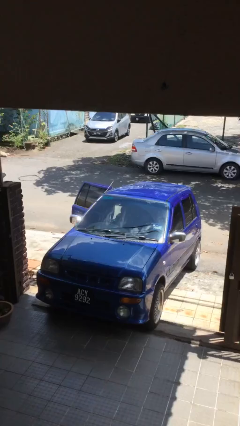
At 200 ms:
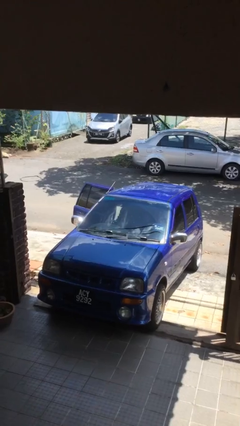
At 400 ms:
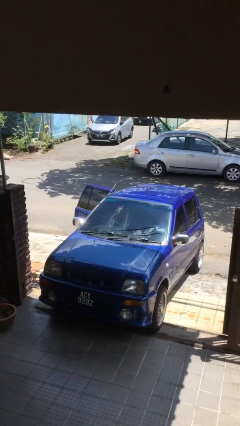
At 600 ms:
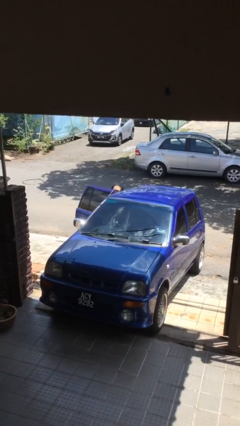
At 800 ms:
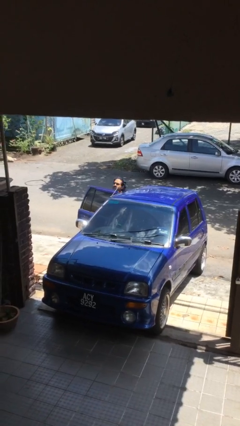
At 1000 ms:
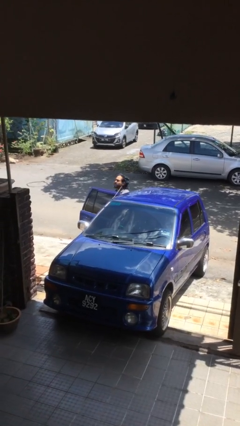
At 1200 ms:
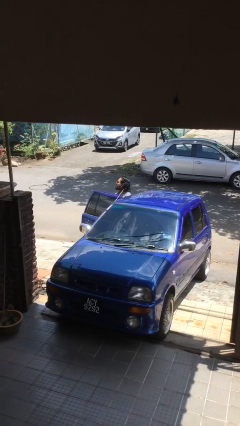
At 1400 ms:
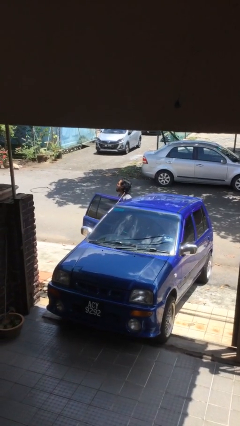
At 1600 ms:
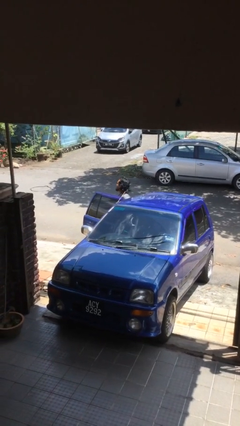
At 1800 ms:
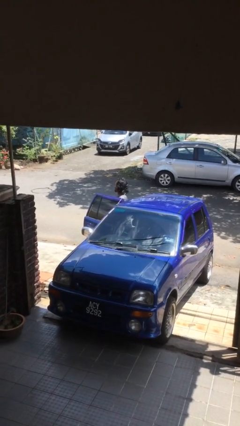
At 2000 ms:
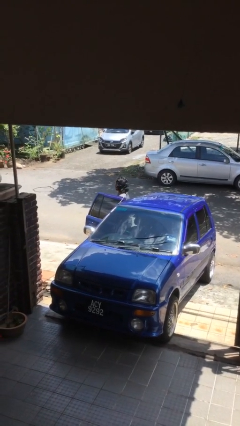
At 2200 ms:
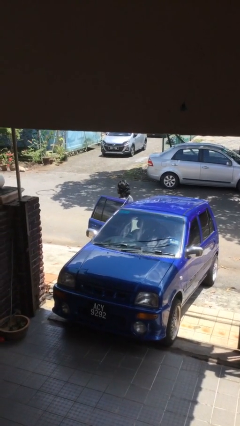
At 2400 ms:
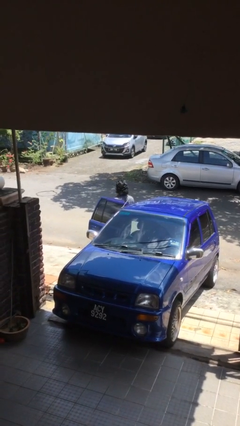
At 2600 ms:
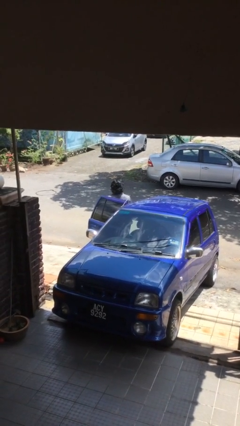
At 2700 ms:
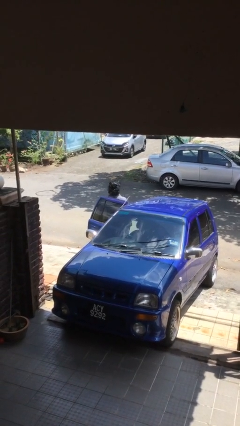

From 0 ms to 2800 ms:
person exits car

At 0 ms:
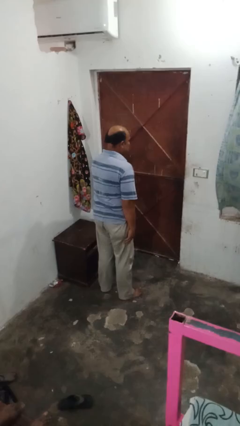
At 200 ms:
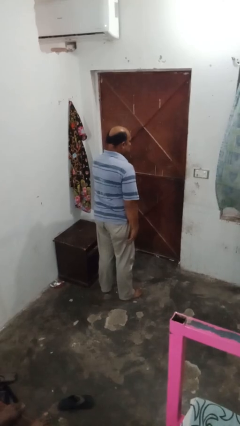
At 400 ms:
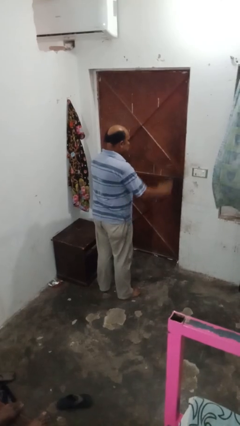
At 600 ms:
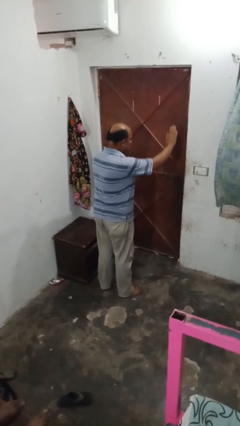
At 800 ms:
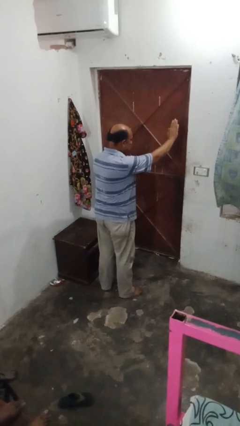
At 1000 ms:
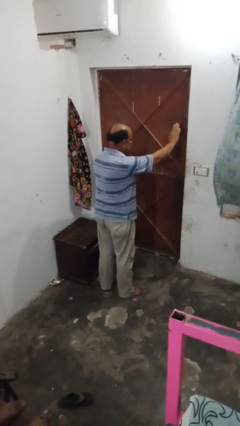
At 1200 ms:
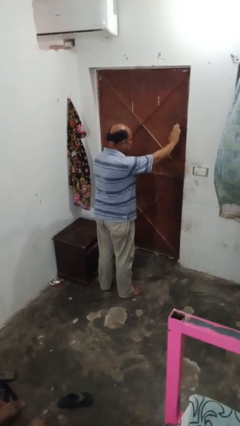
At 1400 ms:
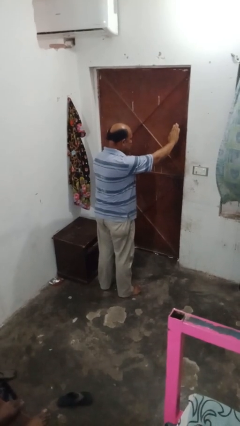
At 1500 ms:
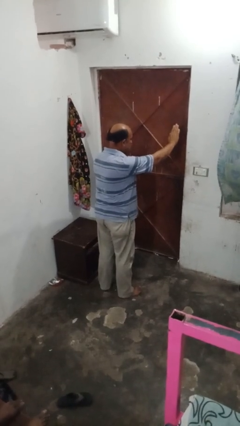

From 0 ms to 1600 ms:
person gestures stop

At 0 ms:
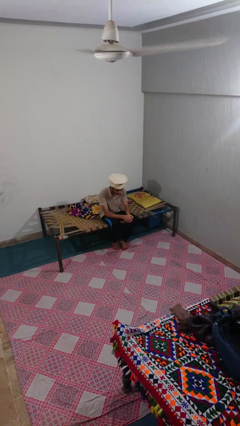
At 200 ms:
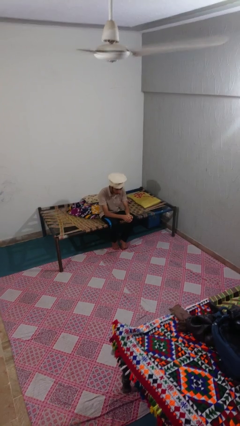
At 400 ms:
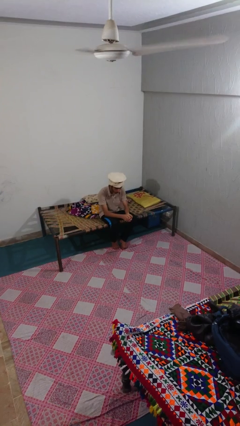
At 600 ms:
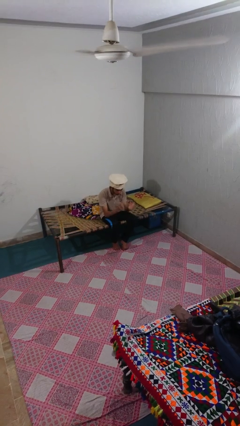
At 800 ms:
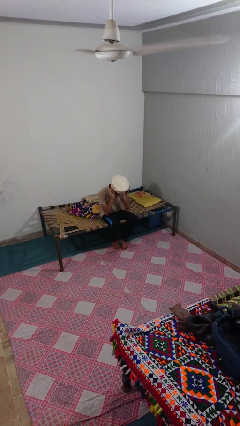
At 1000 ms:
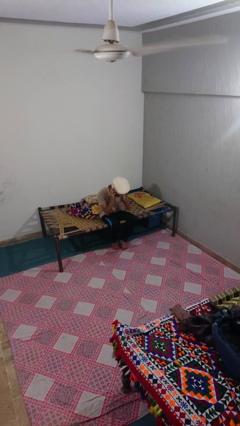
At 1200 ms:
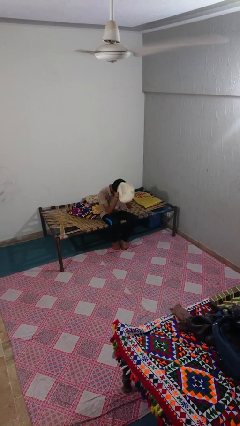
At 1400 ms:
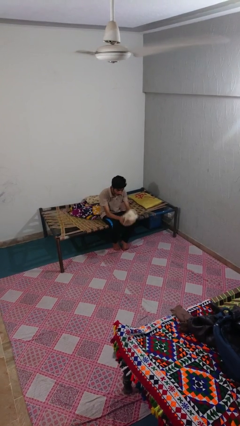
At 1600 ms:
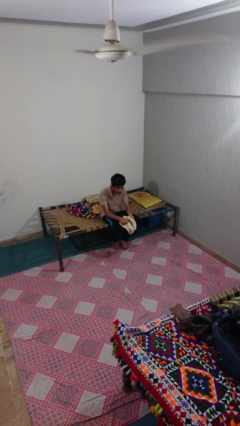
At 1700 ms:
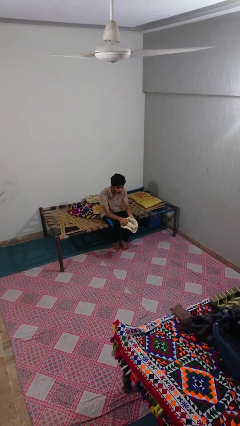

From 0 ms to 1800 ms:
person takes off hat

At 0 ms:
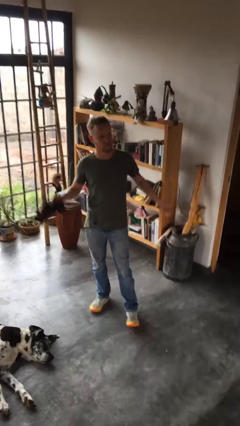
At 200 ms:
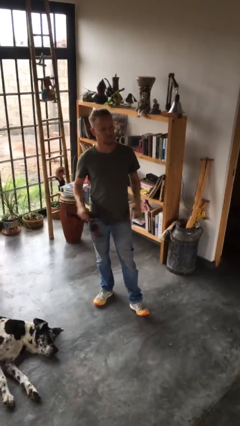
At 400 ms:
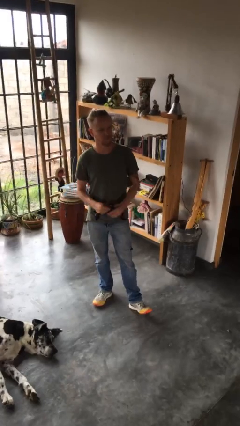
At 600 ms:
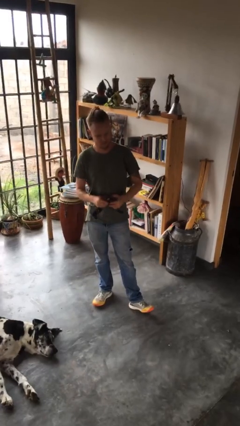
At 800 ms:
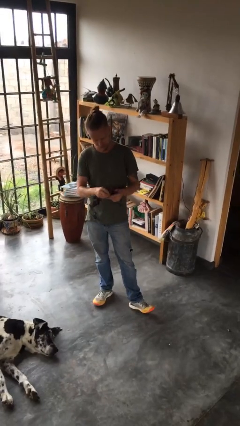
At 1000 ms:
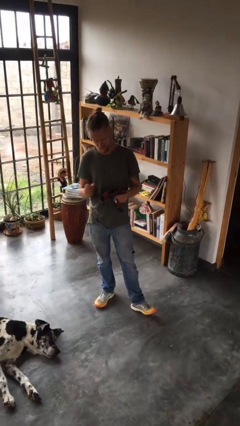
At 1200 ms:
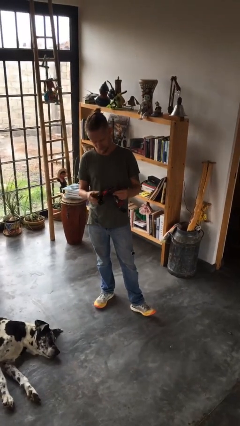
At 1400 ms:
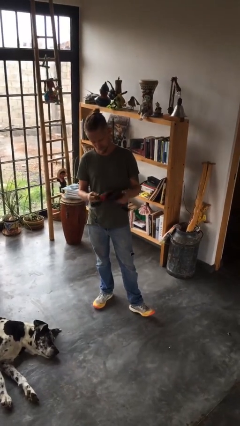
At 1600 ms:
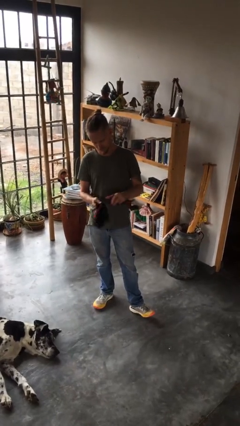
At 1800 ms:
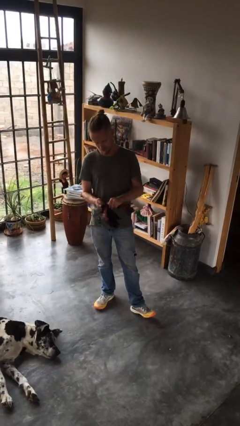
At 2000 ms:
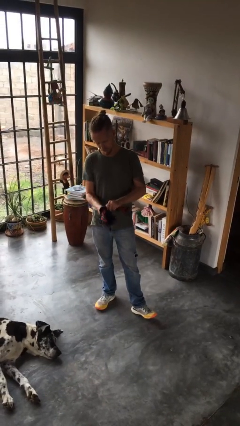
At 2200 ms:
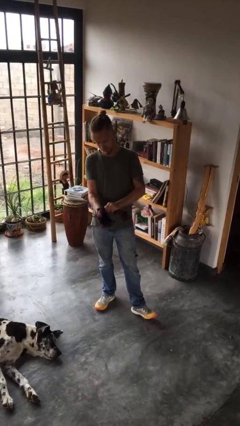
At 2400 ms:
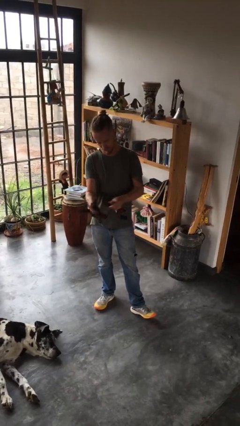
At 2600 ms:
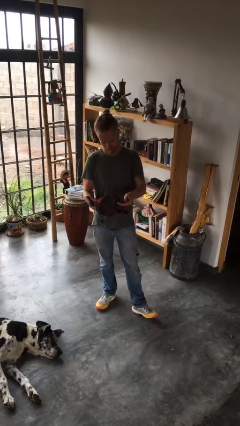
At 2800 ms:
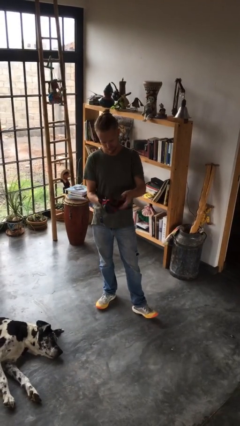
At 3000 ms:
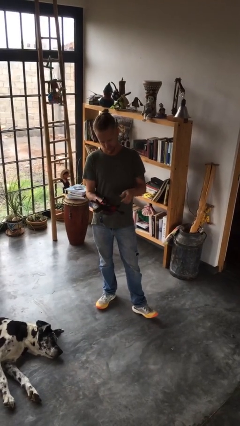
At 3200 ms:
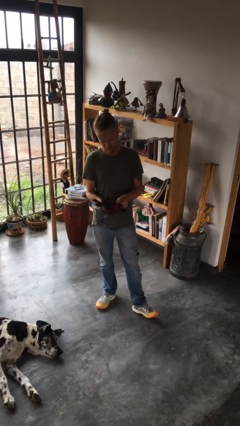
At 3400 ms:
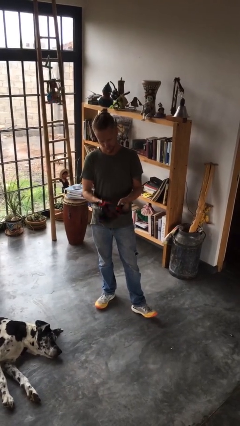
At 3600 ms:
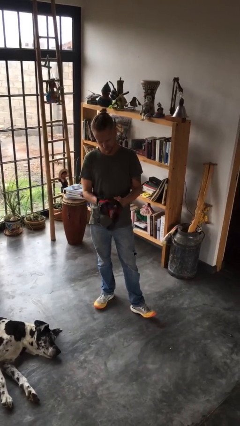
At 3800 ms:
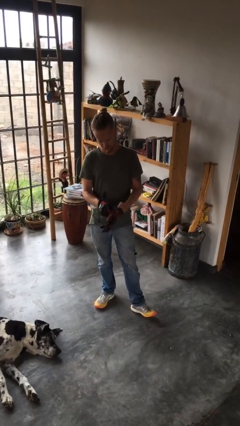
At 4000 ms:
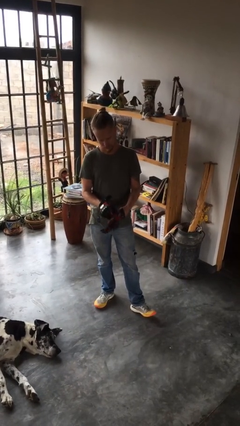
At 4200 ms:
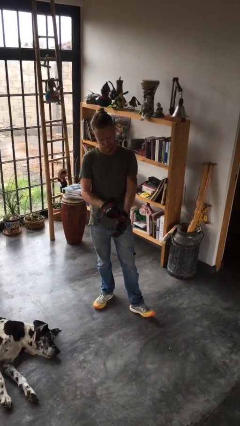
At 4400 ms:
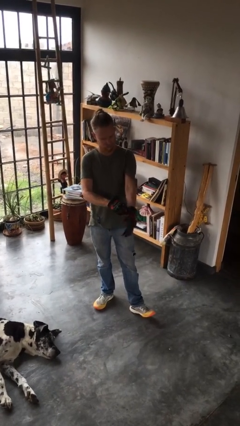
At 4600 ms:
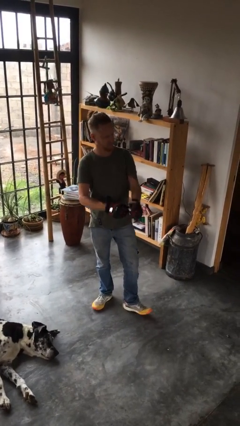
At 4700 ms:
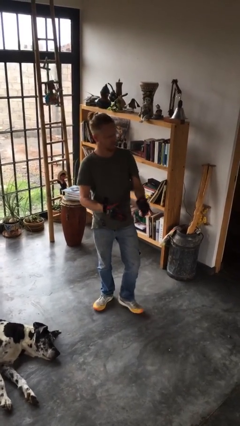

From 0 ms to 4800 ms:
person puts on gloves

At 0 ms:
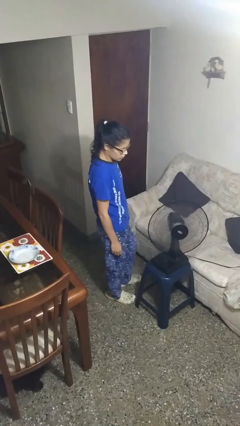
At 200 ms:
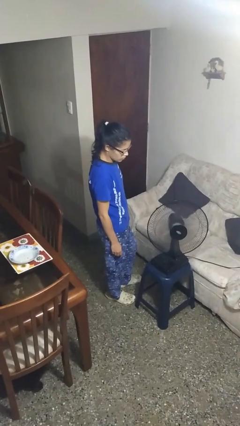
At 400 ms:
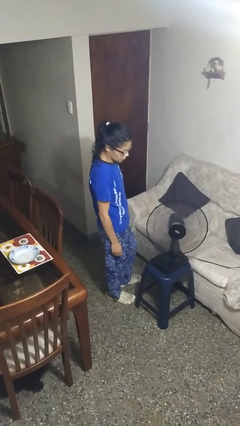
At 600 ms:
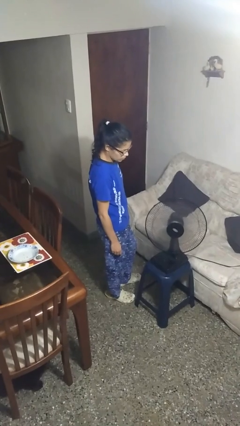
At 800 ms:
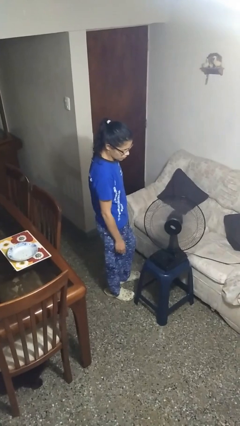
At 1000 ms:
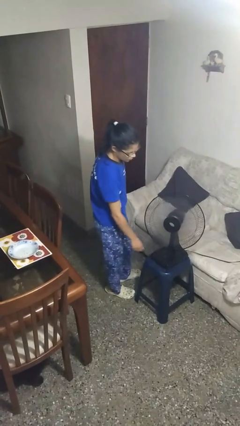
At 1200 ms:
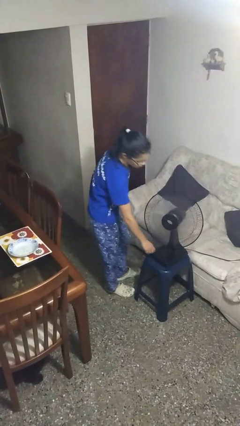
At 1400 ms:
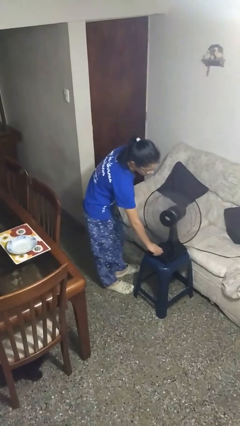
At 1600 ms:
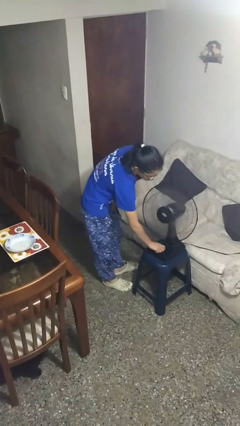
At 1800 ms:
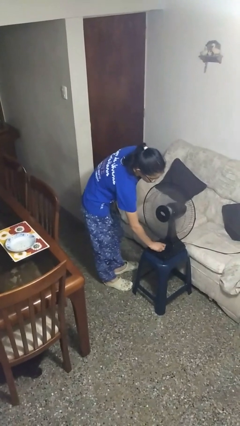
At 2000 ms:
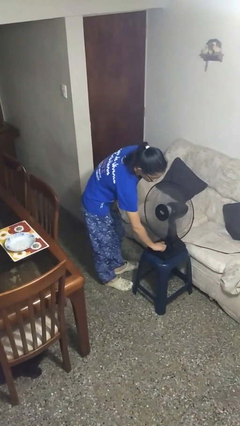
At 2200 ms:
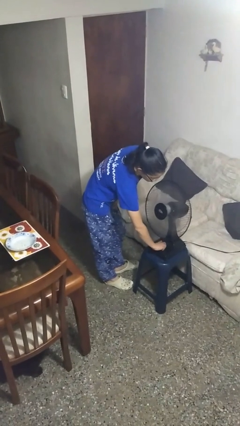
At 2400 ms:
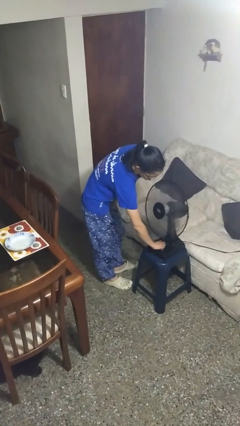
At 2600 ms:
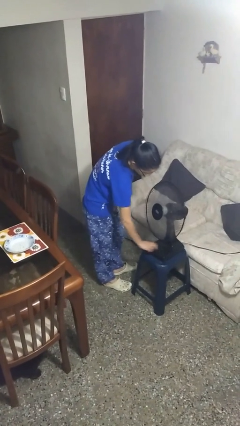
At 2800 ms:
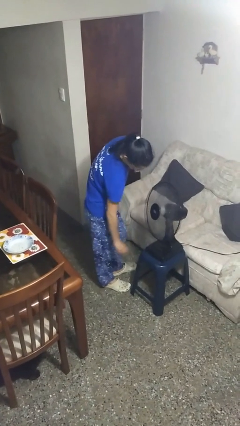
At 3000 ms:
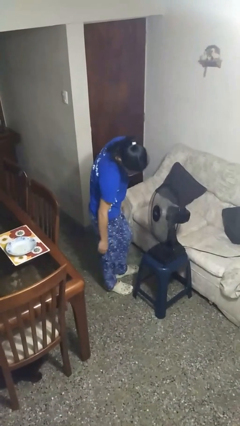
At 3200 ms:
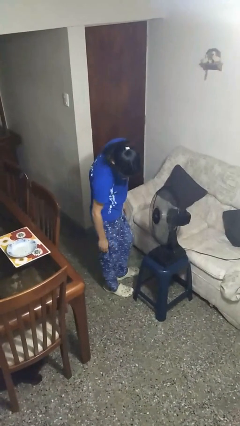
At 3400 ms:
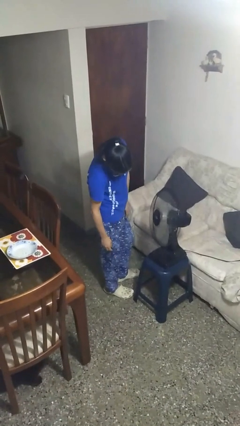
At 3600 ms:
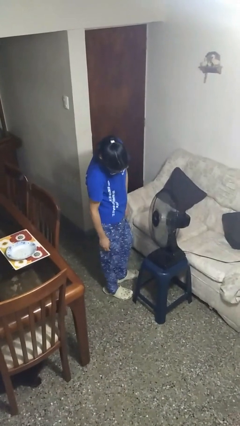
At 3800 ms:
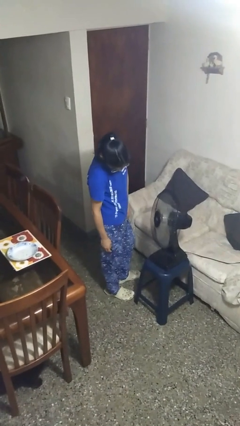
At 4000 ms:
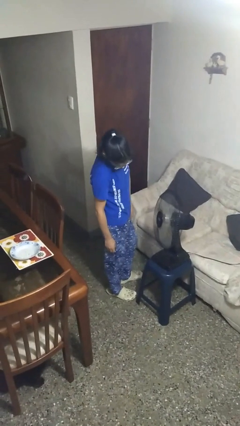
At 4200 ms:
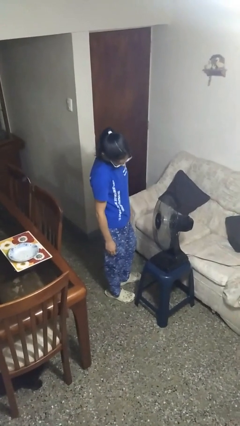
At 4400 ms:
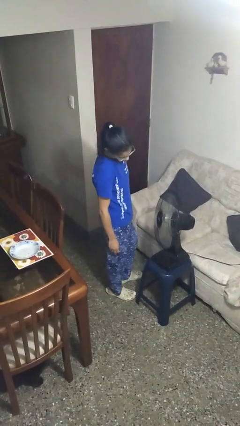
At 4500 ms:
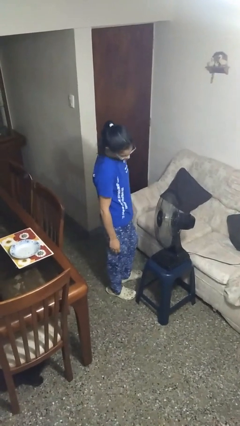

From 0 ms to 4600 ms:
person turns off fan

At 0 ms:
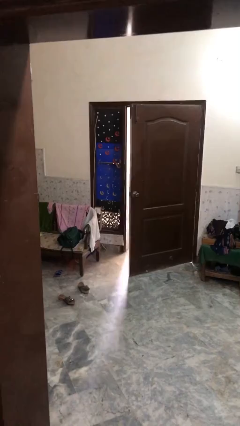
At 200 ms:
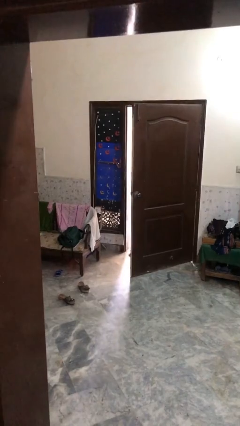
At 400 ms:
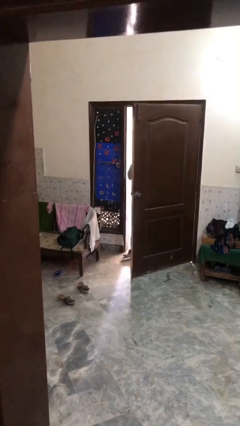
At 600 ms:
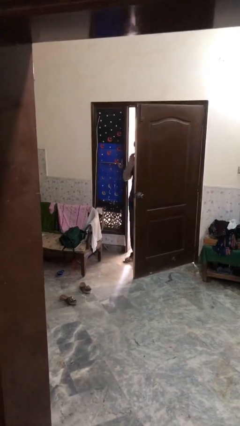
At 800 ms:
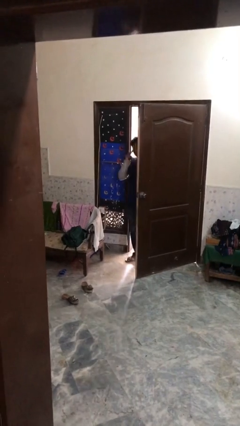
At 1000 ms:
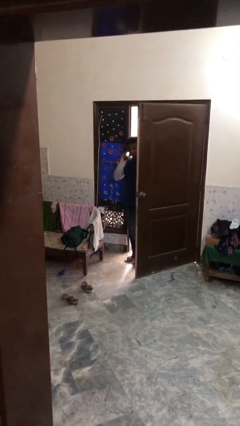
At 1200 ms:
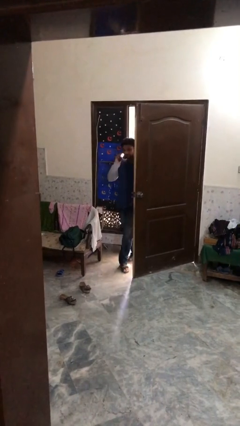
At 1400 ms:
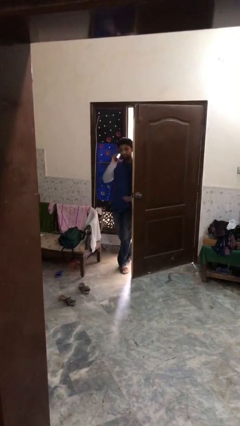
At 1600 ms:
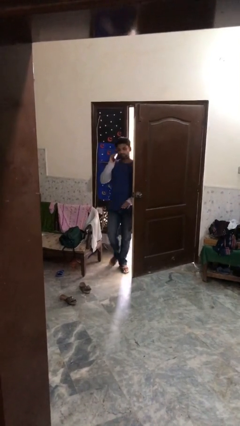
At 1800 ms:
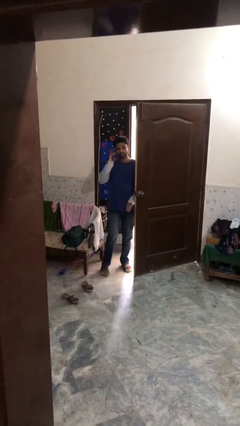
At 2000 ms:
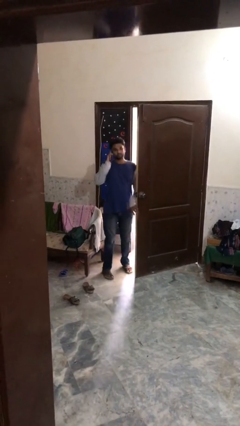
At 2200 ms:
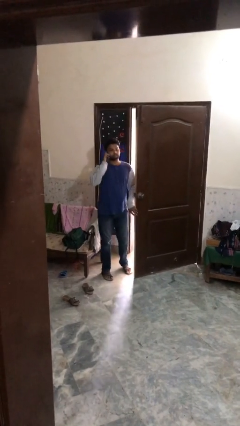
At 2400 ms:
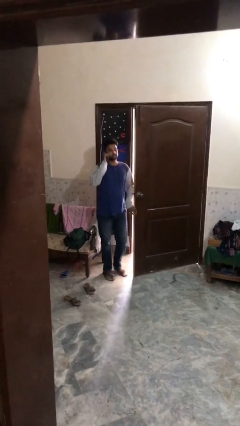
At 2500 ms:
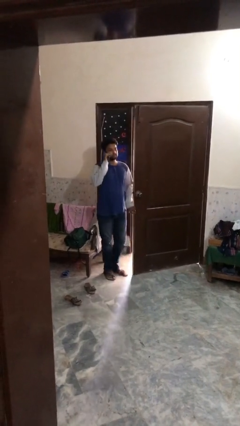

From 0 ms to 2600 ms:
person enters scene through structure
